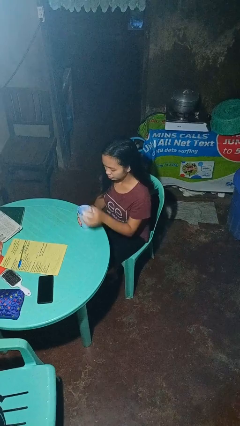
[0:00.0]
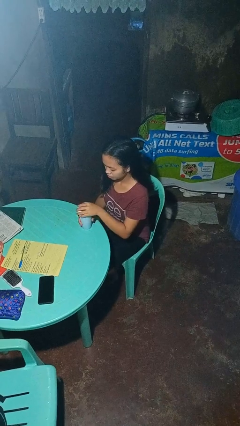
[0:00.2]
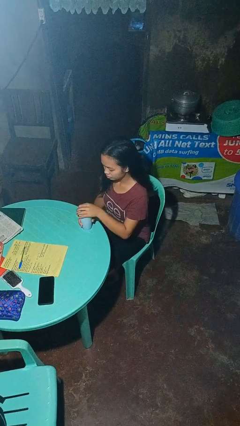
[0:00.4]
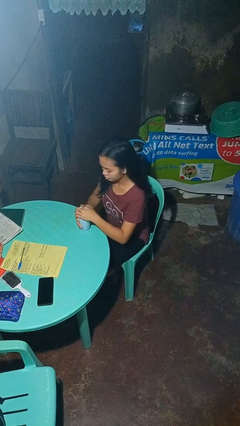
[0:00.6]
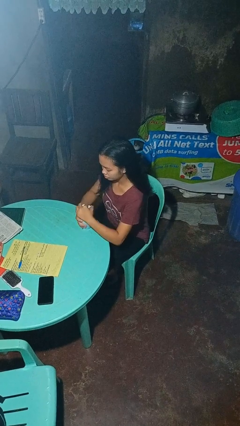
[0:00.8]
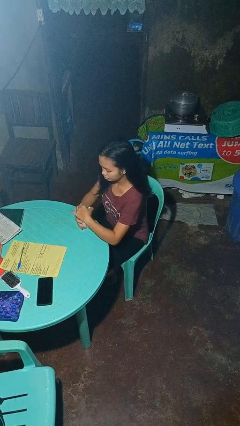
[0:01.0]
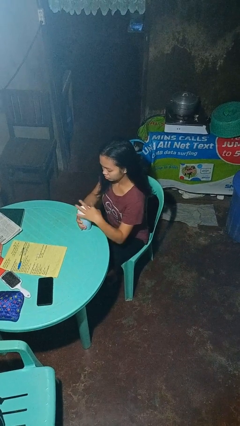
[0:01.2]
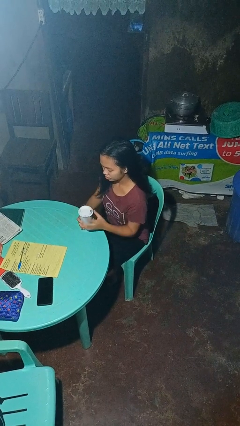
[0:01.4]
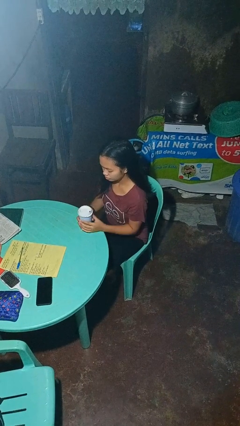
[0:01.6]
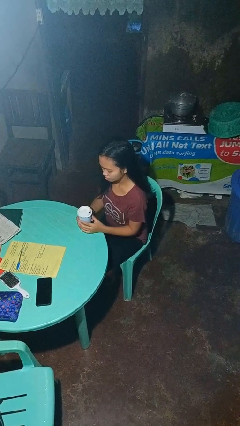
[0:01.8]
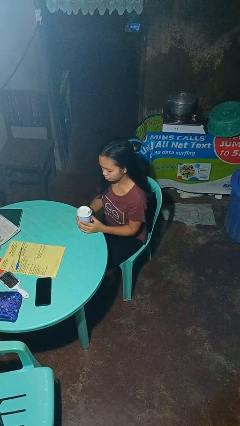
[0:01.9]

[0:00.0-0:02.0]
person screws lid to bottle

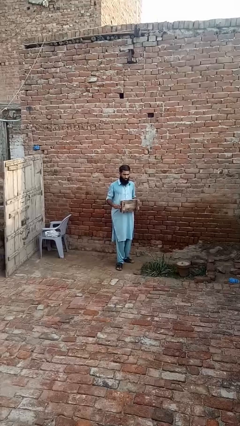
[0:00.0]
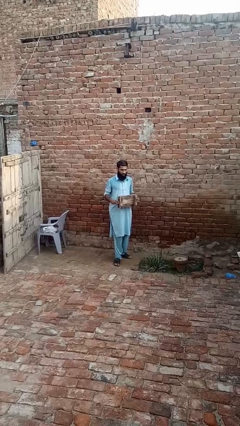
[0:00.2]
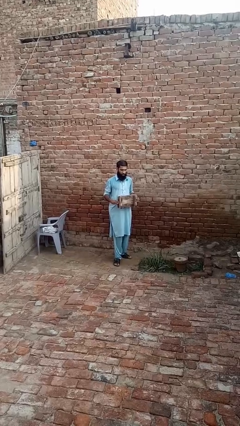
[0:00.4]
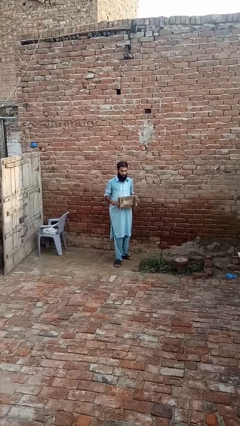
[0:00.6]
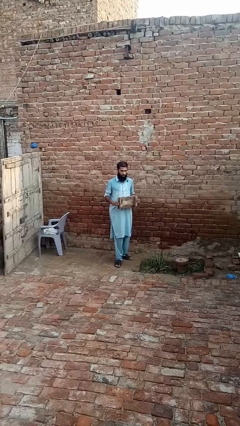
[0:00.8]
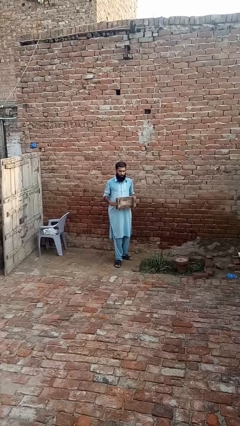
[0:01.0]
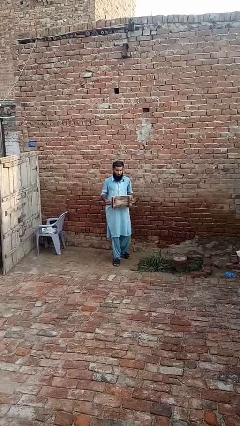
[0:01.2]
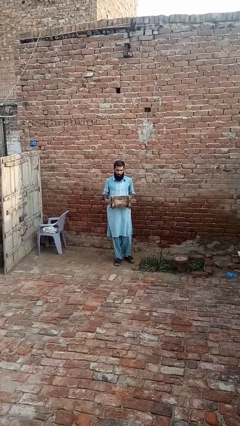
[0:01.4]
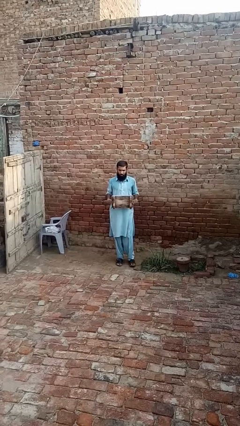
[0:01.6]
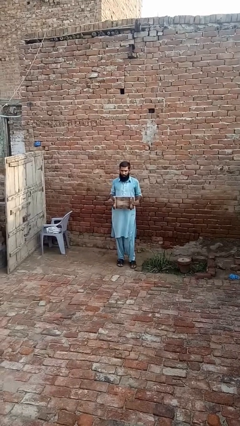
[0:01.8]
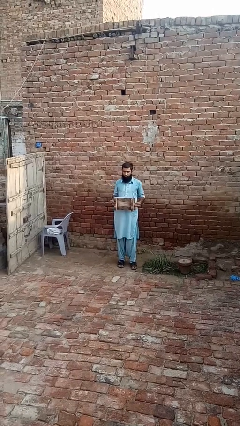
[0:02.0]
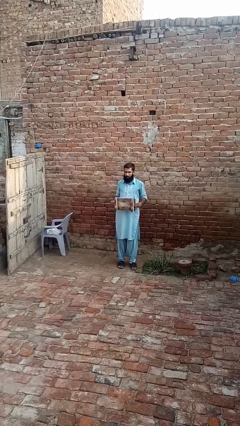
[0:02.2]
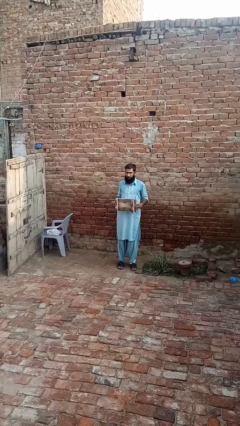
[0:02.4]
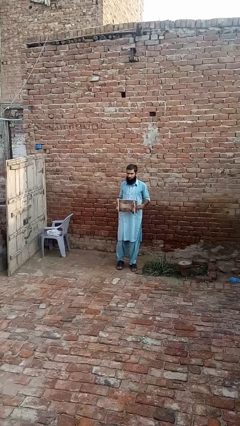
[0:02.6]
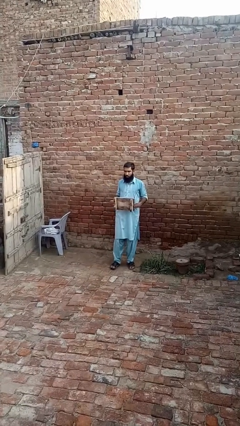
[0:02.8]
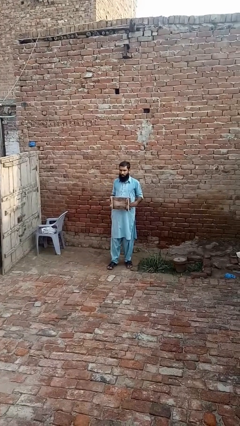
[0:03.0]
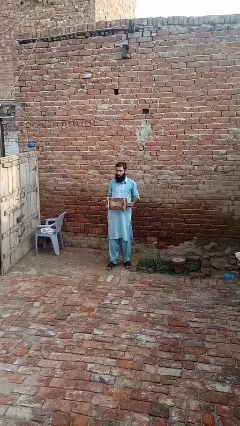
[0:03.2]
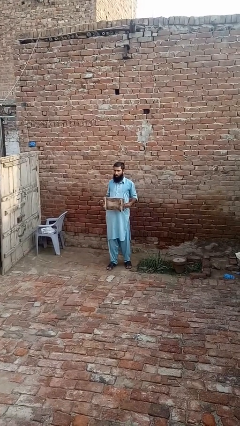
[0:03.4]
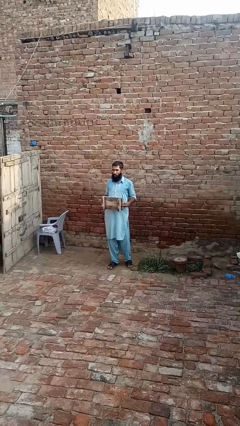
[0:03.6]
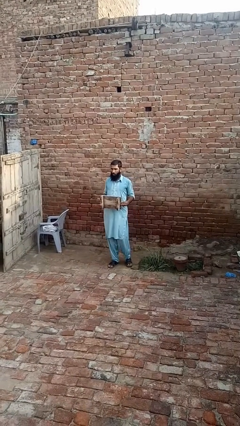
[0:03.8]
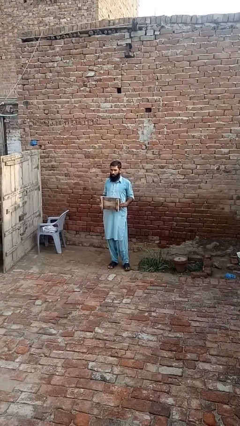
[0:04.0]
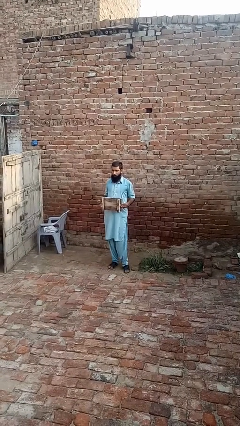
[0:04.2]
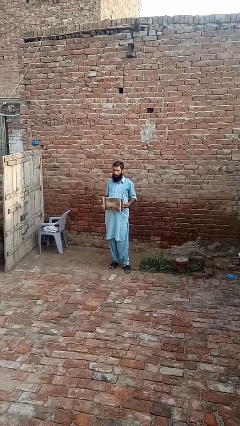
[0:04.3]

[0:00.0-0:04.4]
person carries furniture

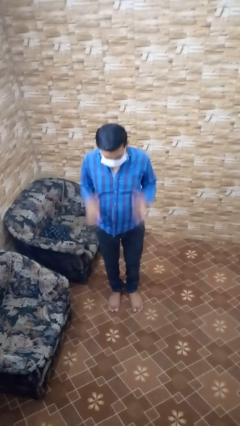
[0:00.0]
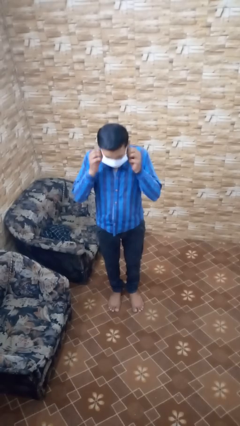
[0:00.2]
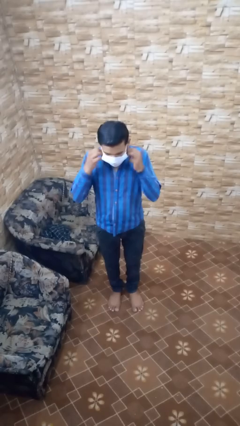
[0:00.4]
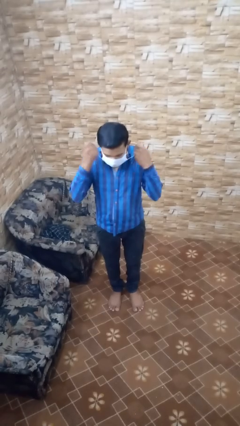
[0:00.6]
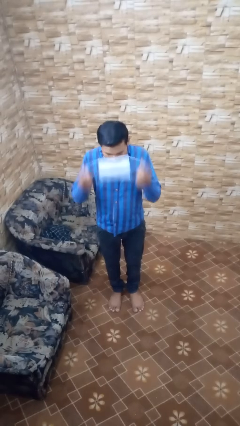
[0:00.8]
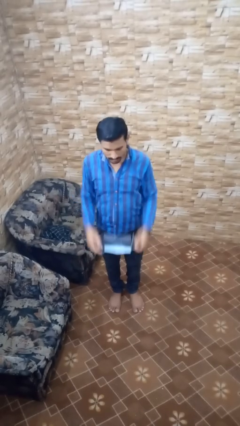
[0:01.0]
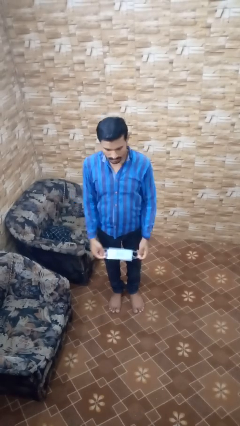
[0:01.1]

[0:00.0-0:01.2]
person takes off facemask

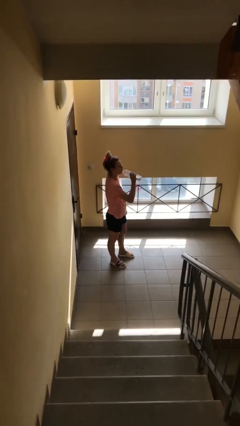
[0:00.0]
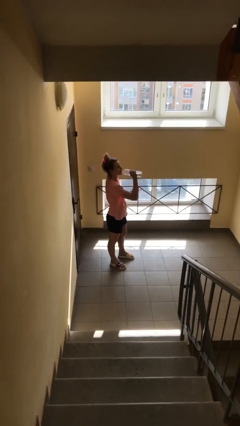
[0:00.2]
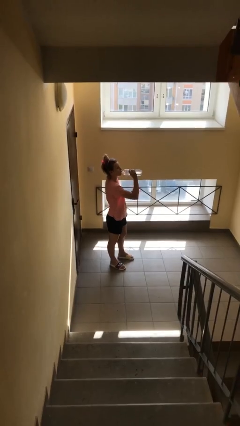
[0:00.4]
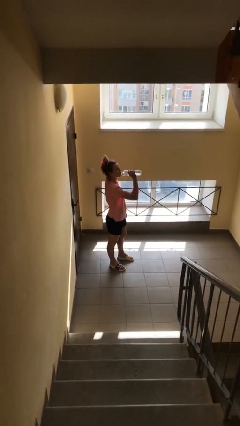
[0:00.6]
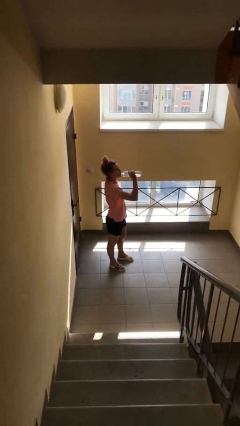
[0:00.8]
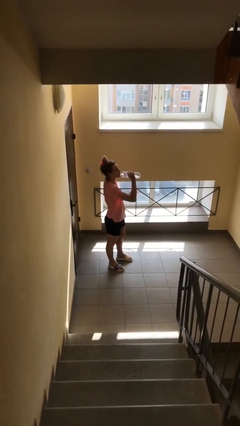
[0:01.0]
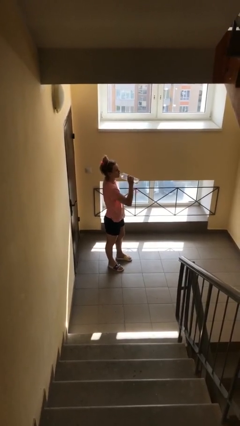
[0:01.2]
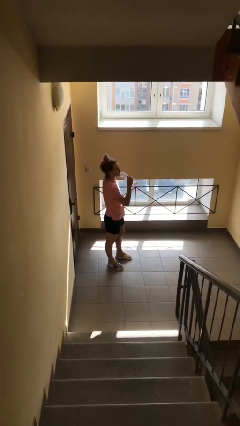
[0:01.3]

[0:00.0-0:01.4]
person drinks from bottle

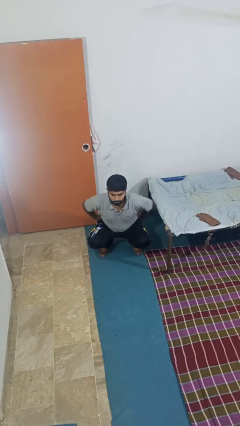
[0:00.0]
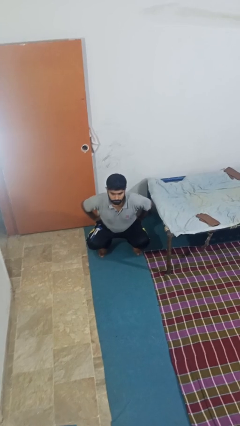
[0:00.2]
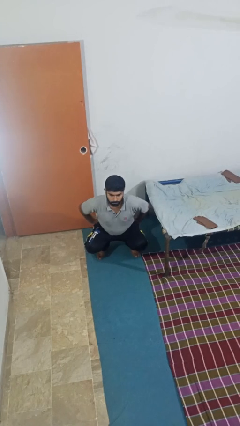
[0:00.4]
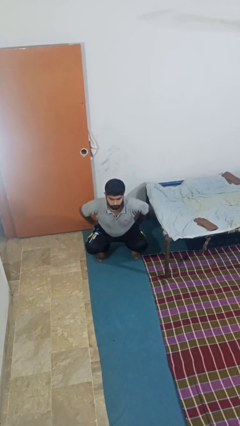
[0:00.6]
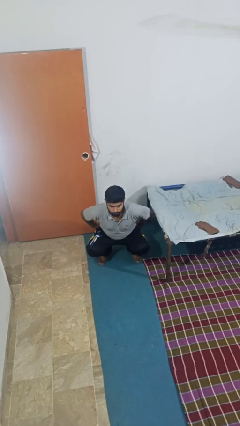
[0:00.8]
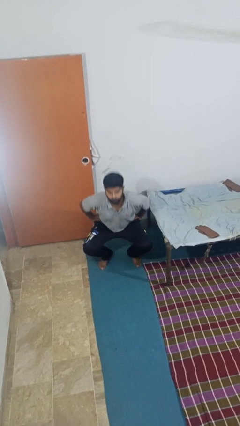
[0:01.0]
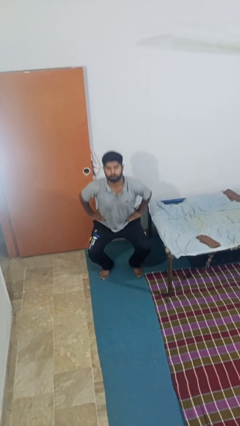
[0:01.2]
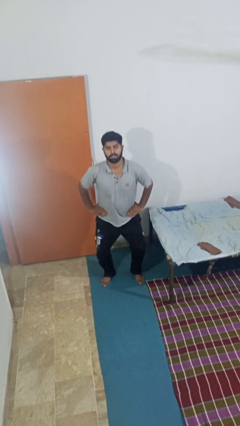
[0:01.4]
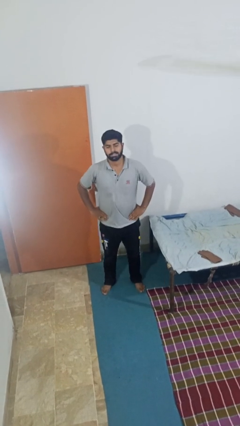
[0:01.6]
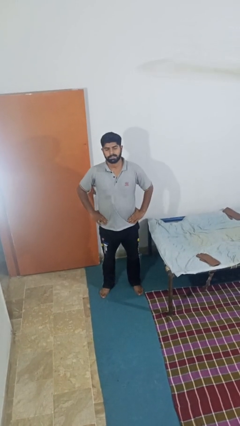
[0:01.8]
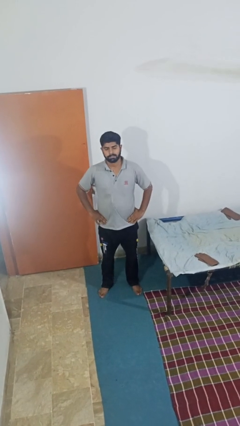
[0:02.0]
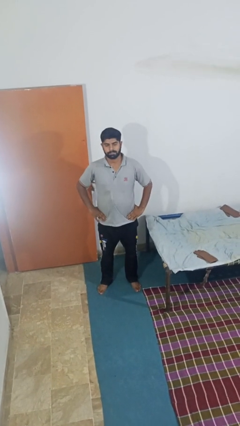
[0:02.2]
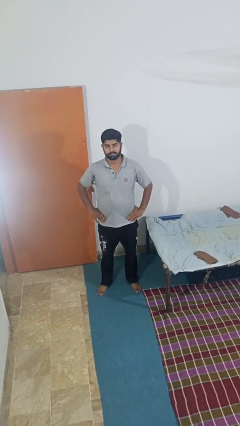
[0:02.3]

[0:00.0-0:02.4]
person stands up

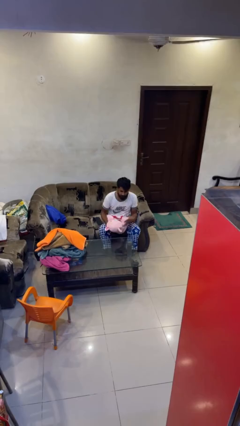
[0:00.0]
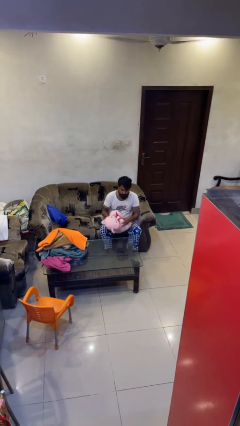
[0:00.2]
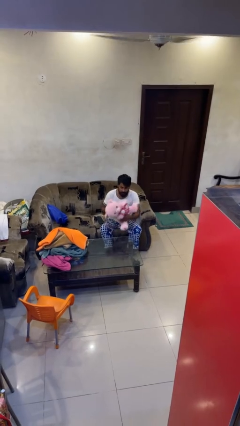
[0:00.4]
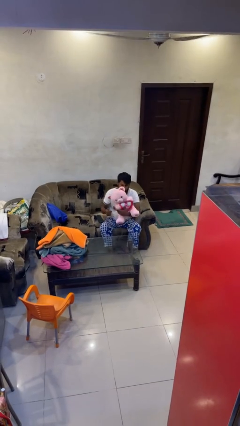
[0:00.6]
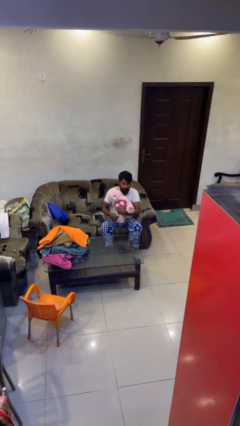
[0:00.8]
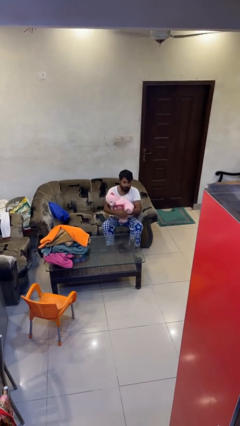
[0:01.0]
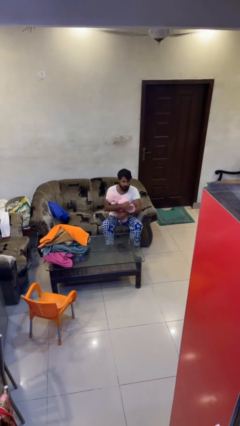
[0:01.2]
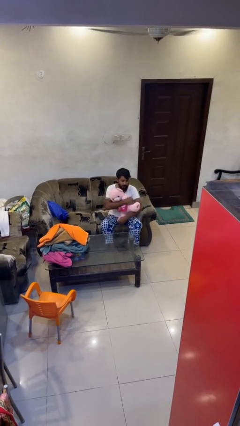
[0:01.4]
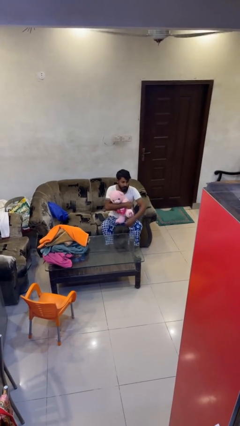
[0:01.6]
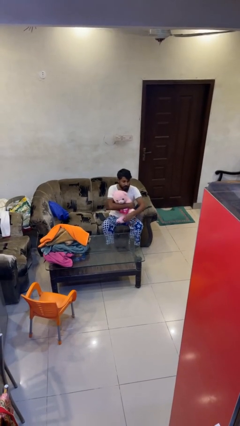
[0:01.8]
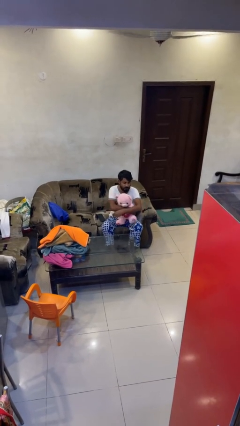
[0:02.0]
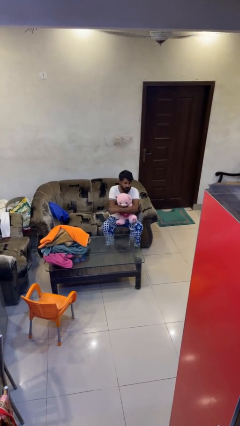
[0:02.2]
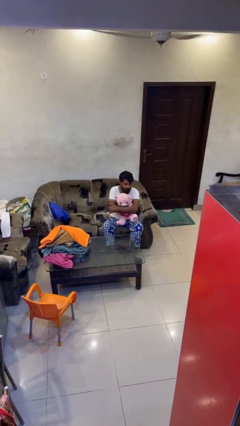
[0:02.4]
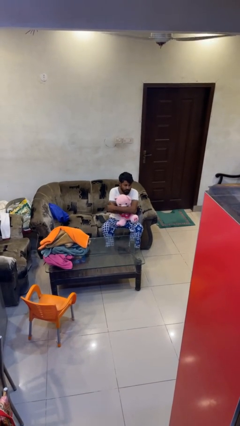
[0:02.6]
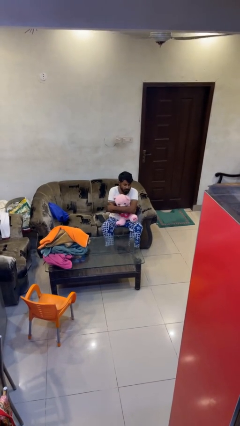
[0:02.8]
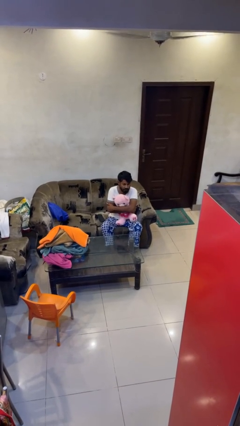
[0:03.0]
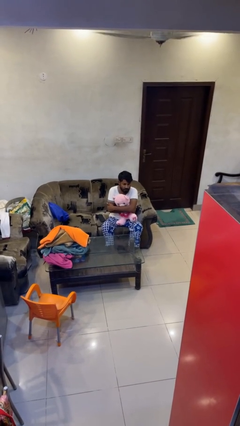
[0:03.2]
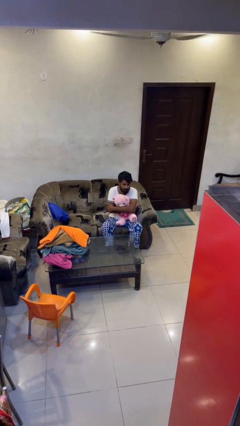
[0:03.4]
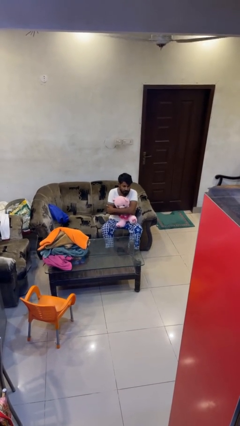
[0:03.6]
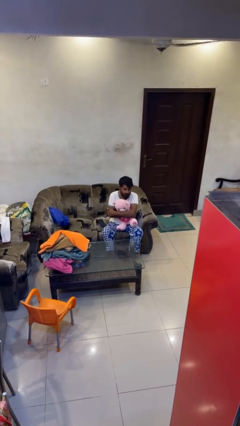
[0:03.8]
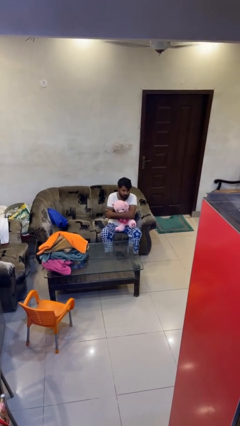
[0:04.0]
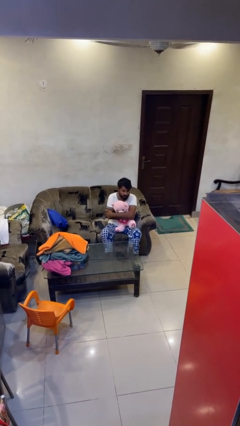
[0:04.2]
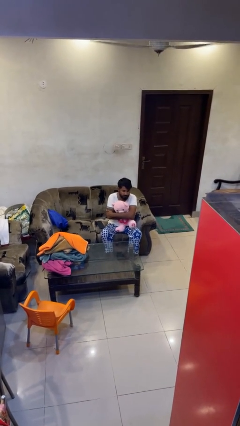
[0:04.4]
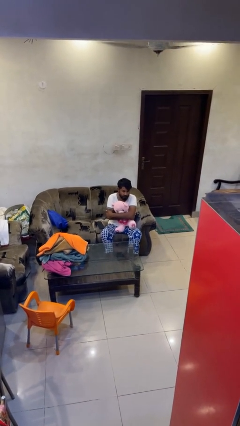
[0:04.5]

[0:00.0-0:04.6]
person hugs stuffed animal

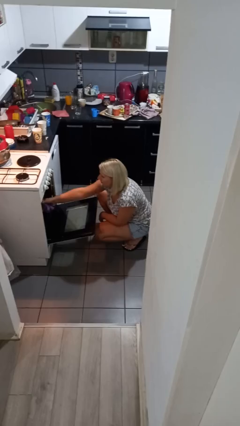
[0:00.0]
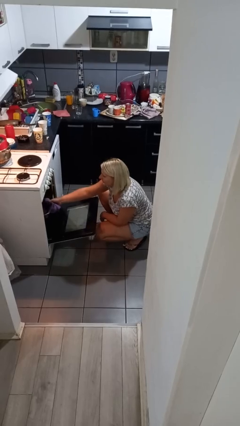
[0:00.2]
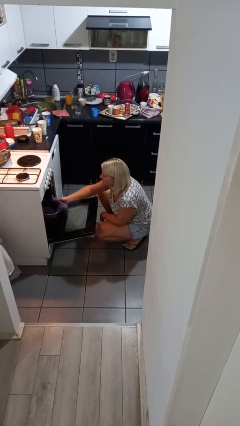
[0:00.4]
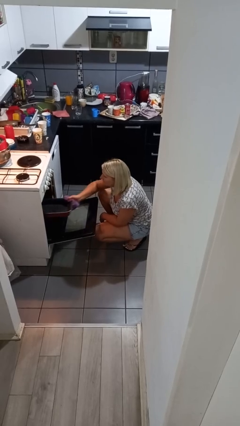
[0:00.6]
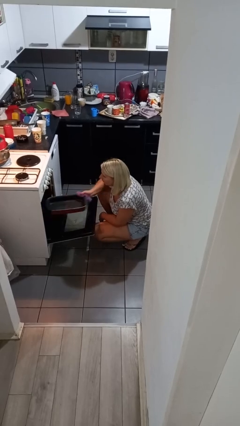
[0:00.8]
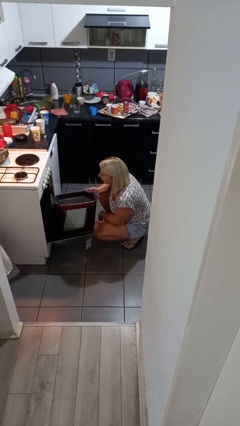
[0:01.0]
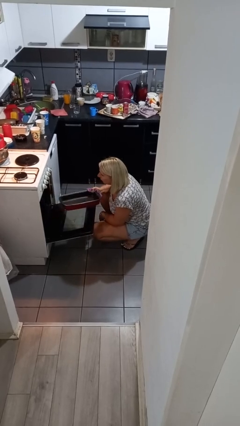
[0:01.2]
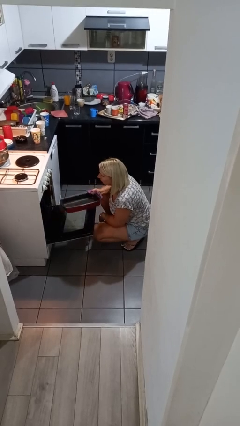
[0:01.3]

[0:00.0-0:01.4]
person takes object from oven
